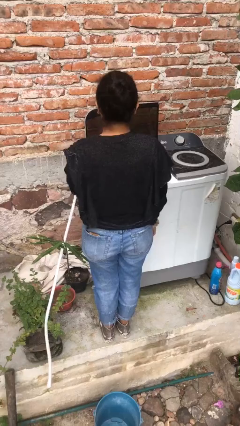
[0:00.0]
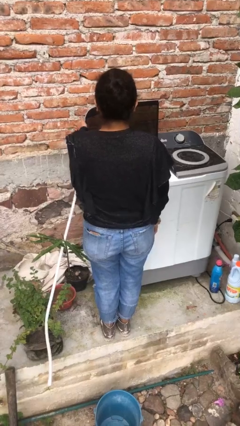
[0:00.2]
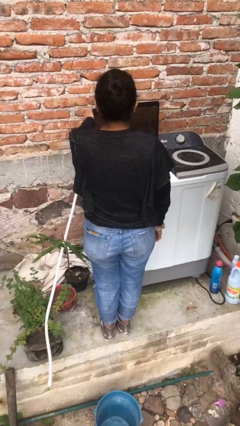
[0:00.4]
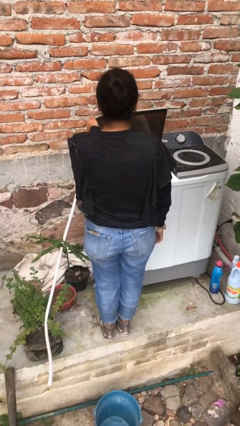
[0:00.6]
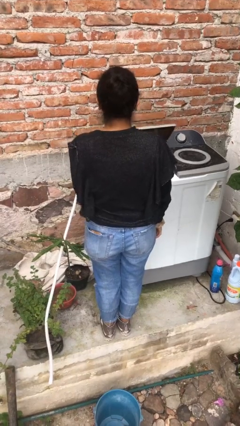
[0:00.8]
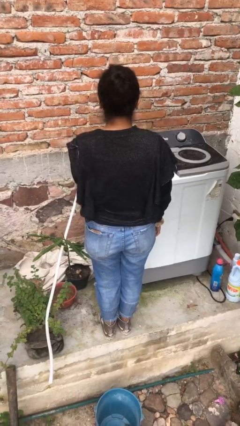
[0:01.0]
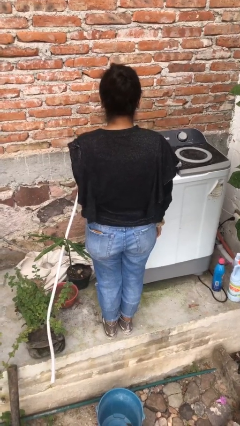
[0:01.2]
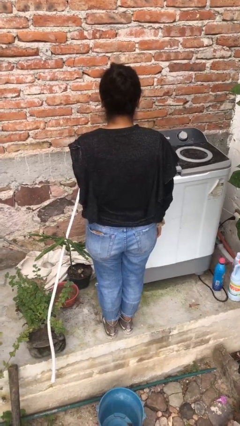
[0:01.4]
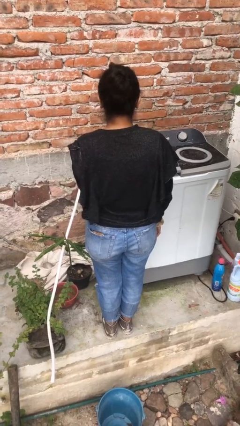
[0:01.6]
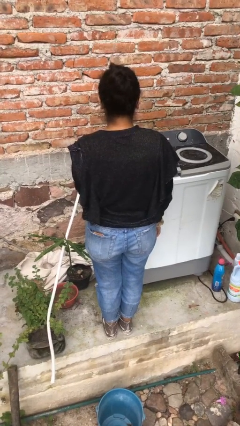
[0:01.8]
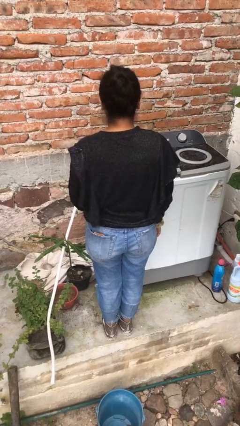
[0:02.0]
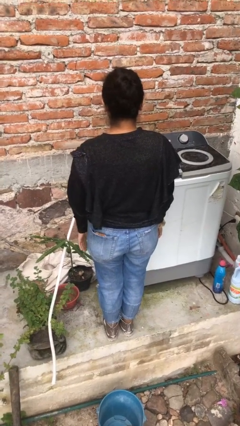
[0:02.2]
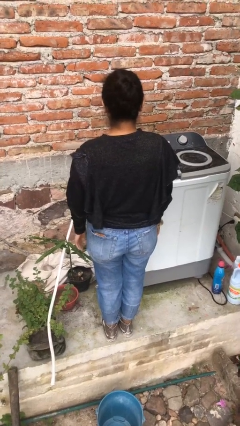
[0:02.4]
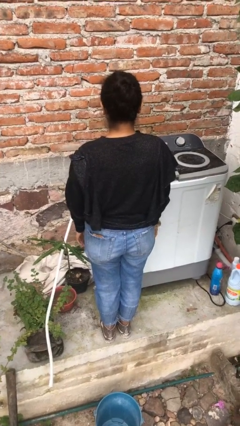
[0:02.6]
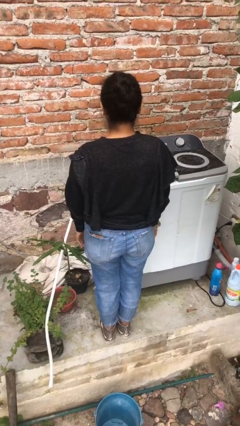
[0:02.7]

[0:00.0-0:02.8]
person closes clothes washer

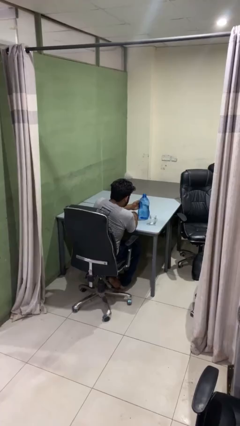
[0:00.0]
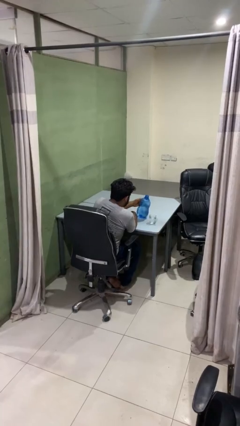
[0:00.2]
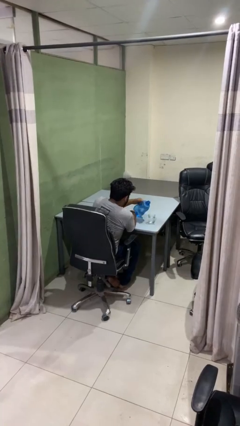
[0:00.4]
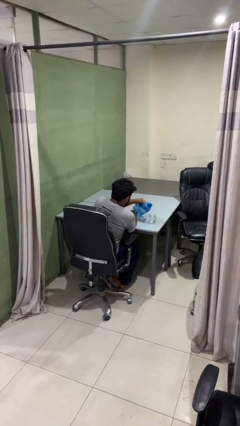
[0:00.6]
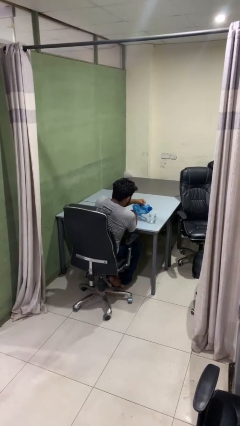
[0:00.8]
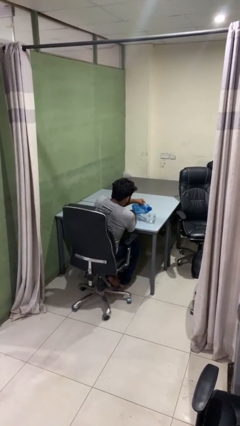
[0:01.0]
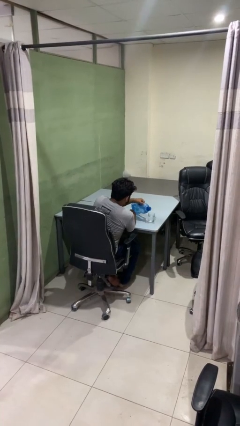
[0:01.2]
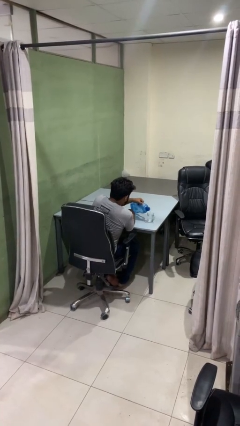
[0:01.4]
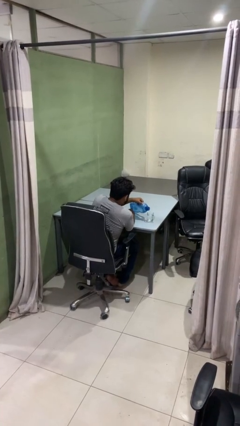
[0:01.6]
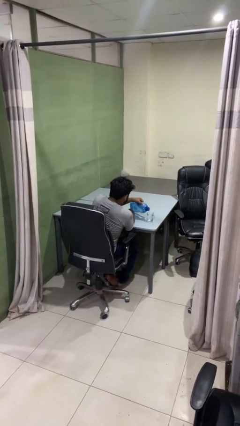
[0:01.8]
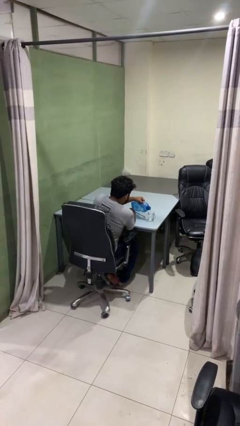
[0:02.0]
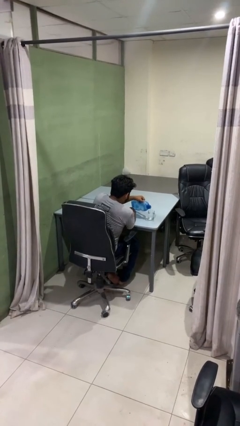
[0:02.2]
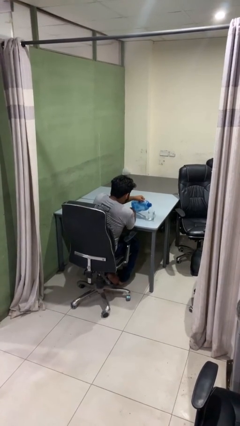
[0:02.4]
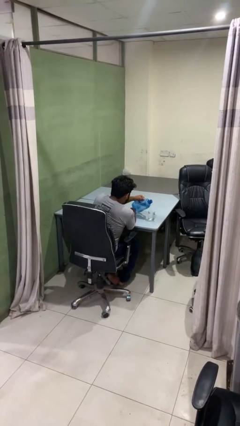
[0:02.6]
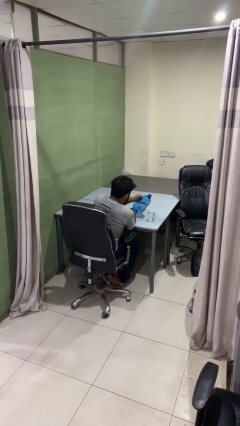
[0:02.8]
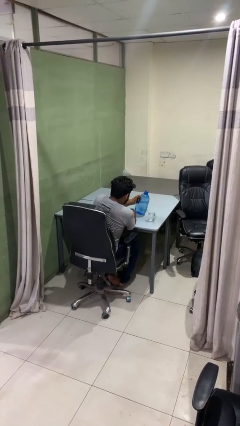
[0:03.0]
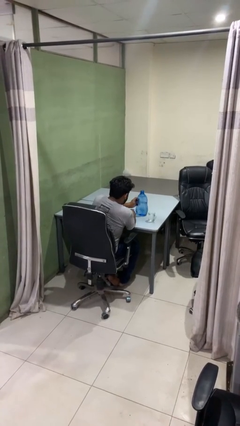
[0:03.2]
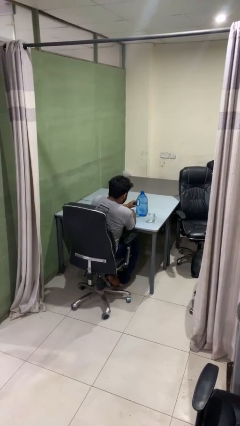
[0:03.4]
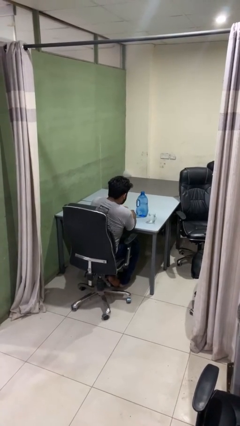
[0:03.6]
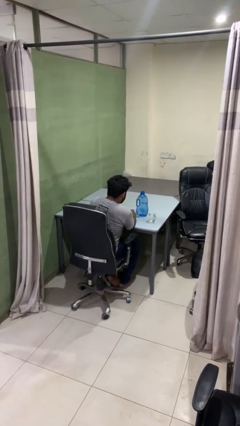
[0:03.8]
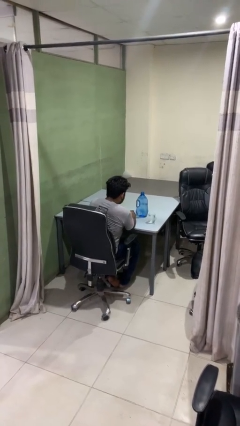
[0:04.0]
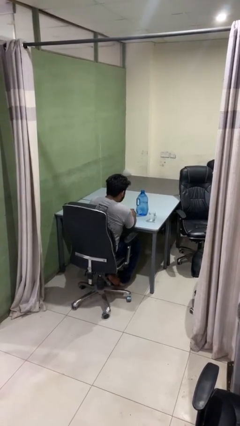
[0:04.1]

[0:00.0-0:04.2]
person pours liquid into cup

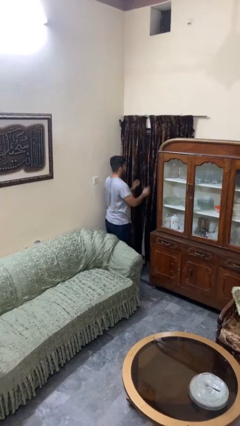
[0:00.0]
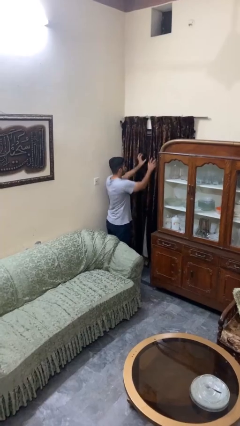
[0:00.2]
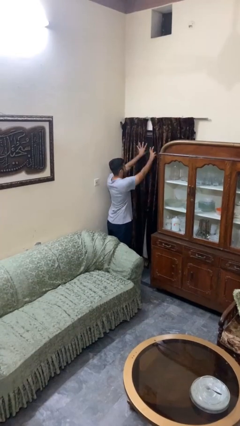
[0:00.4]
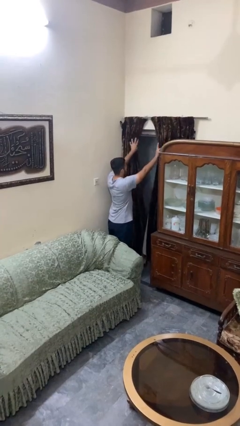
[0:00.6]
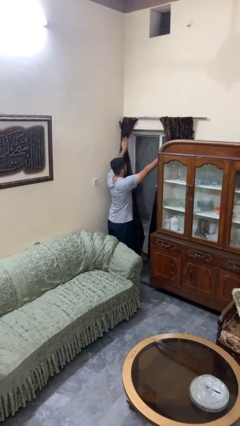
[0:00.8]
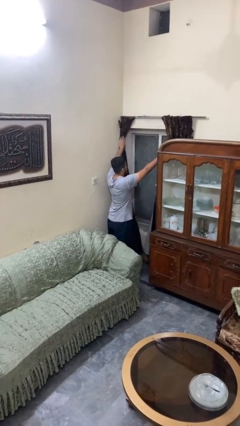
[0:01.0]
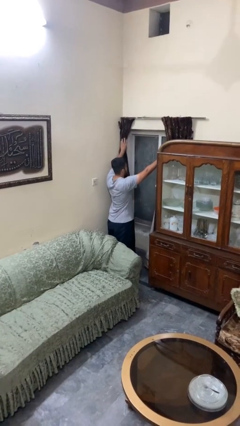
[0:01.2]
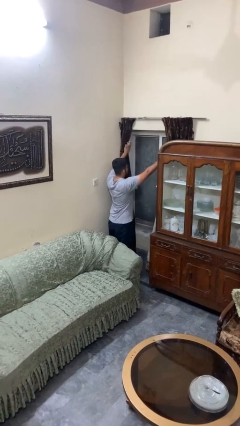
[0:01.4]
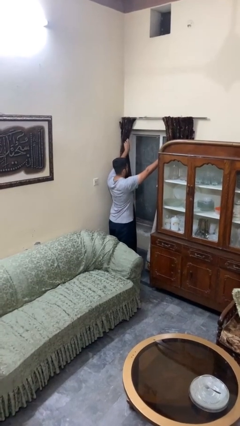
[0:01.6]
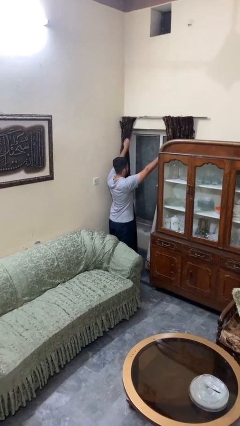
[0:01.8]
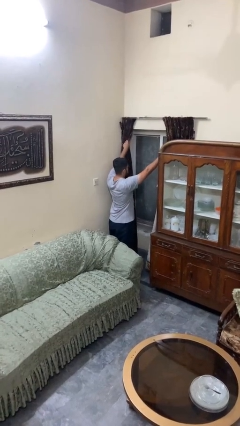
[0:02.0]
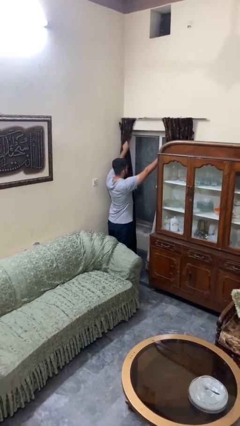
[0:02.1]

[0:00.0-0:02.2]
person opens curtains

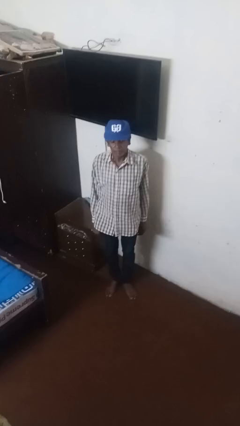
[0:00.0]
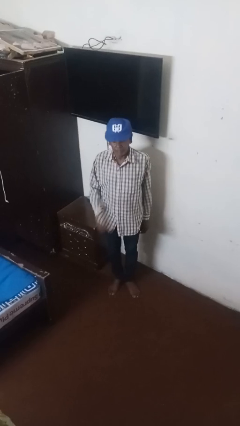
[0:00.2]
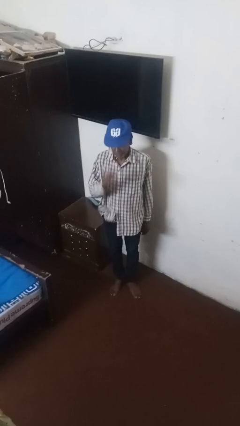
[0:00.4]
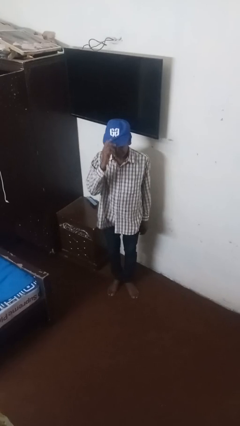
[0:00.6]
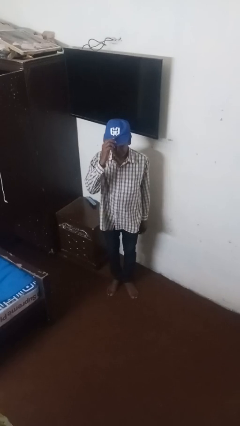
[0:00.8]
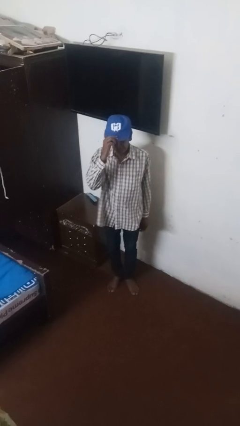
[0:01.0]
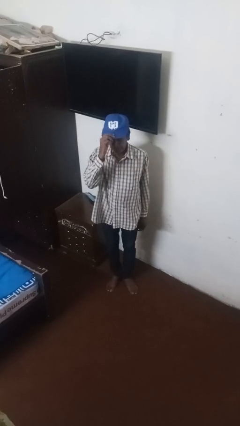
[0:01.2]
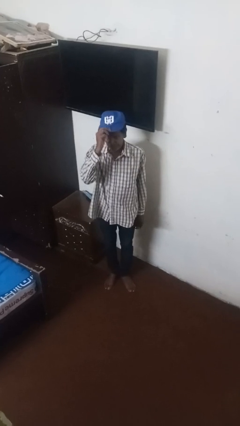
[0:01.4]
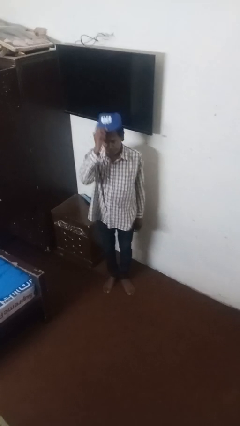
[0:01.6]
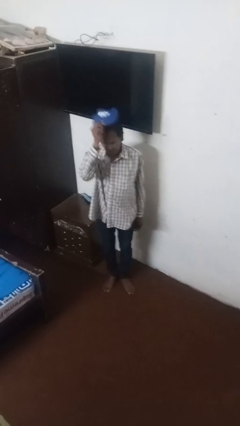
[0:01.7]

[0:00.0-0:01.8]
person takes off hat

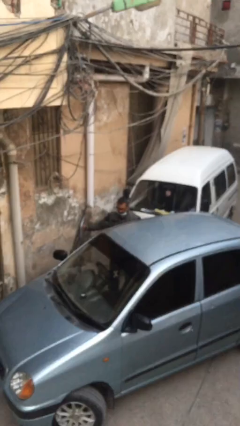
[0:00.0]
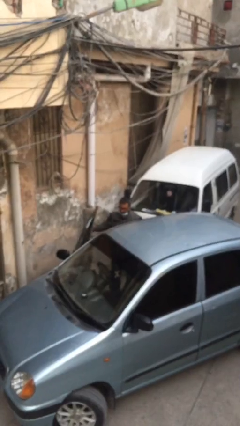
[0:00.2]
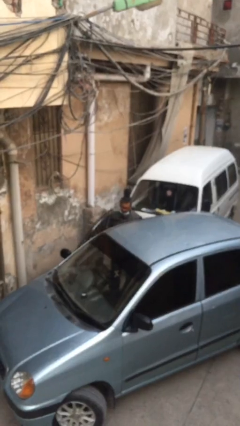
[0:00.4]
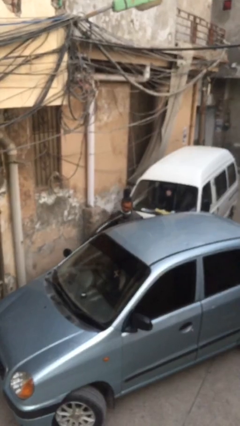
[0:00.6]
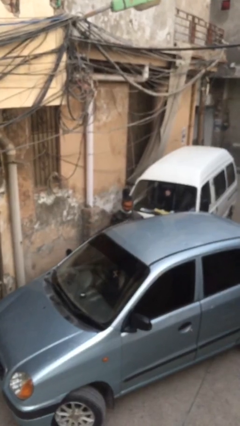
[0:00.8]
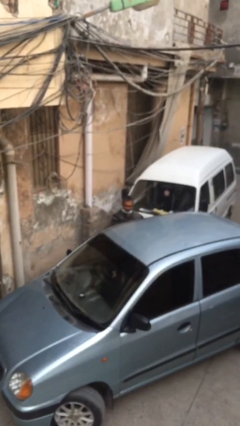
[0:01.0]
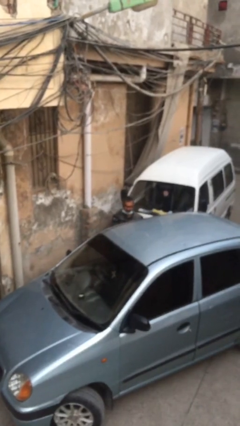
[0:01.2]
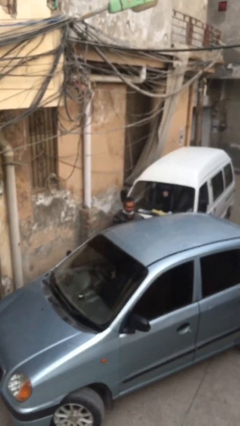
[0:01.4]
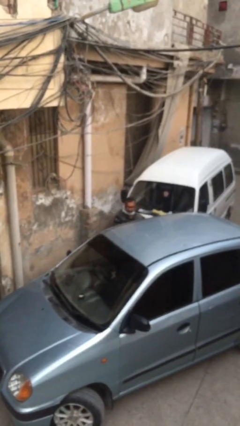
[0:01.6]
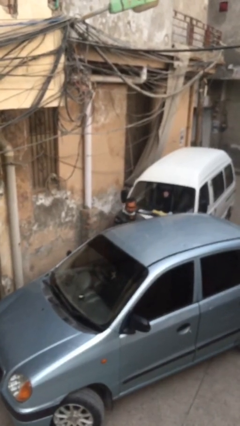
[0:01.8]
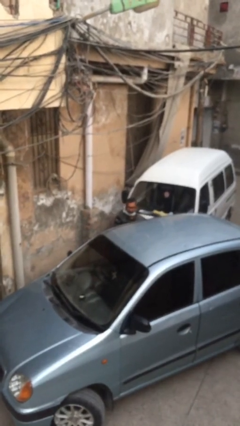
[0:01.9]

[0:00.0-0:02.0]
person closes car door

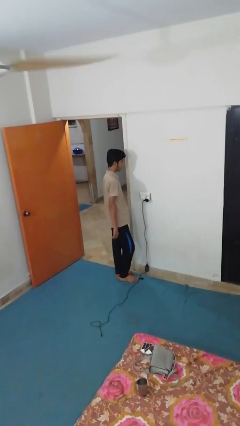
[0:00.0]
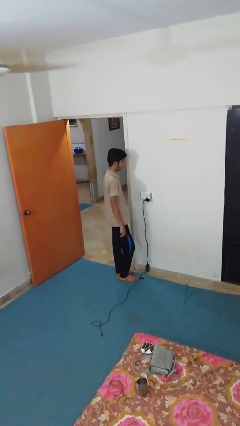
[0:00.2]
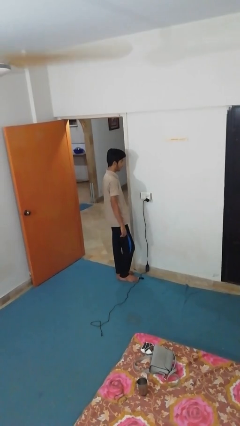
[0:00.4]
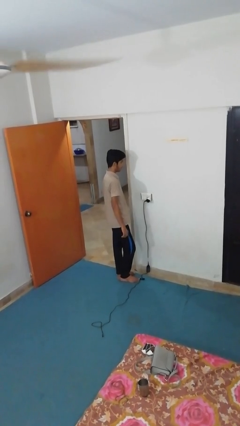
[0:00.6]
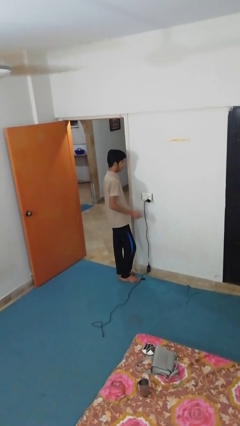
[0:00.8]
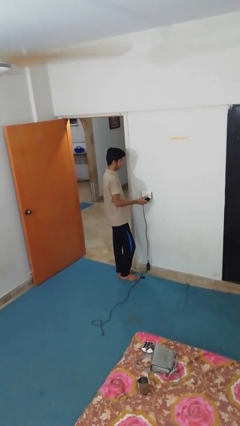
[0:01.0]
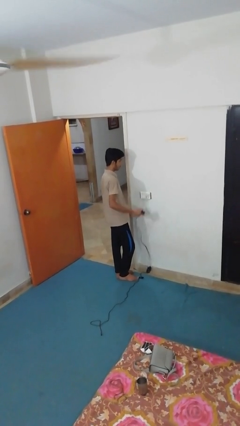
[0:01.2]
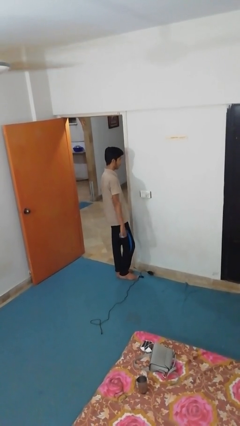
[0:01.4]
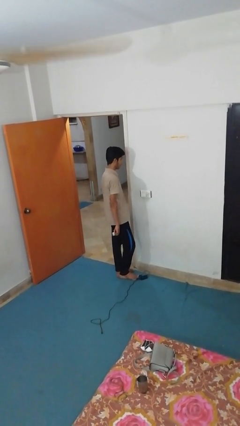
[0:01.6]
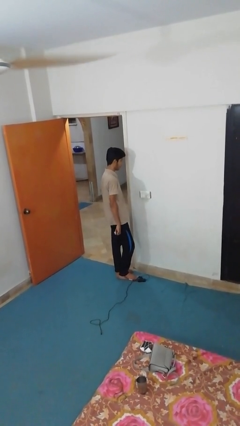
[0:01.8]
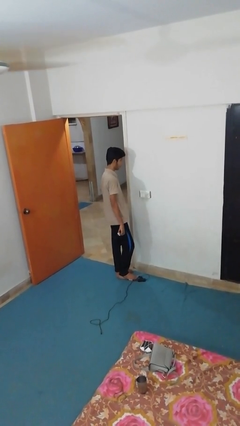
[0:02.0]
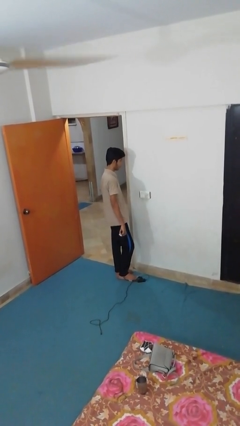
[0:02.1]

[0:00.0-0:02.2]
person unplugs from electrical socket

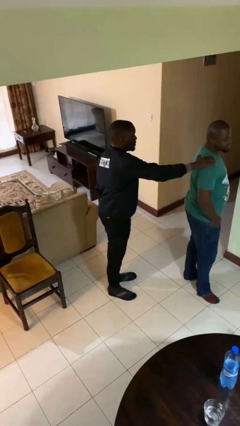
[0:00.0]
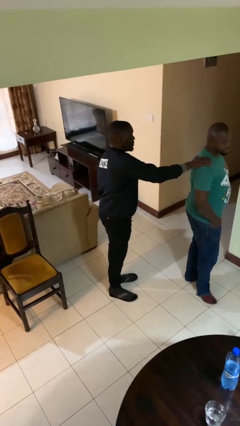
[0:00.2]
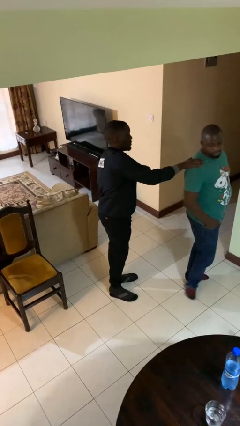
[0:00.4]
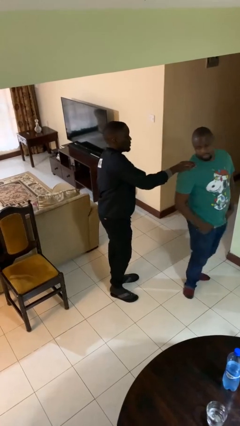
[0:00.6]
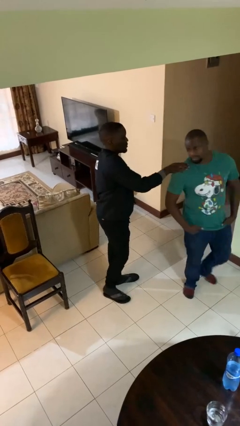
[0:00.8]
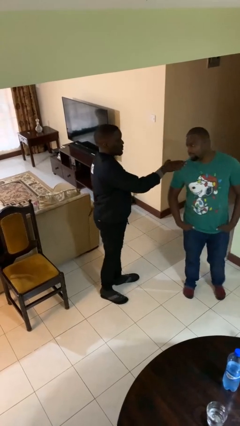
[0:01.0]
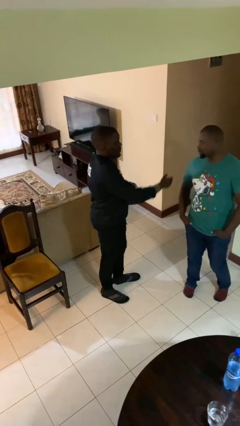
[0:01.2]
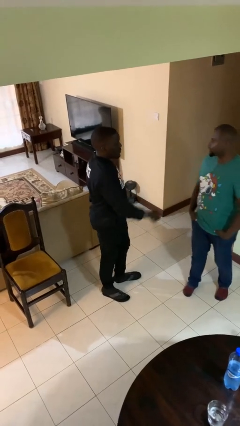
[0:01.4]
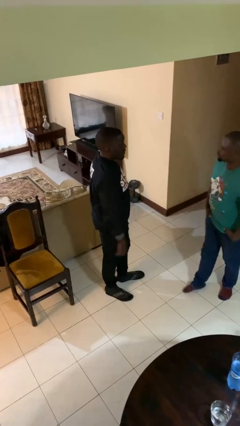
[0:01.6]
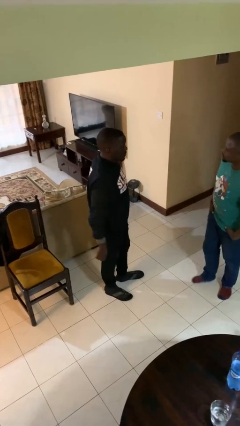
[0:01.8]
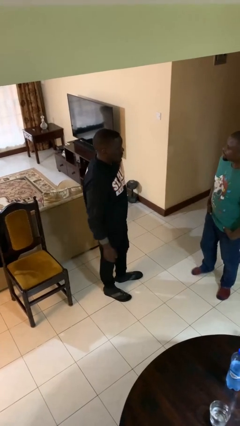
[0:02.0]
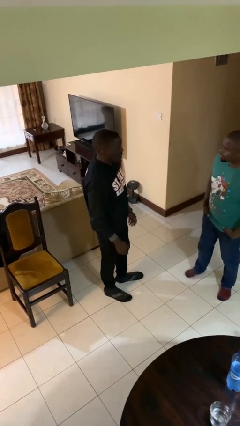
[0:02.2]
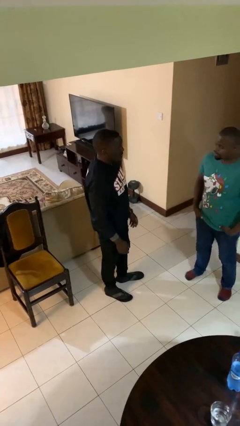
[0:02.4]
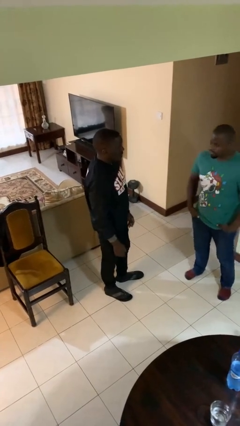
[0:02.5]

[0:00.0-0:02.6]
person spins person around
